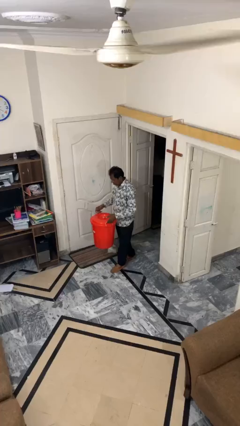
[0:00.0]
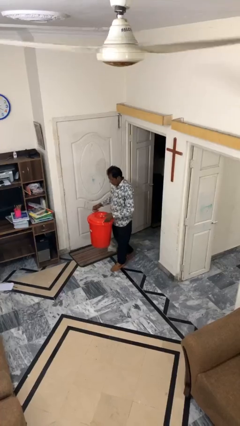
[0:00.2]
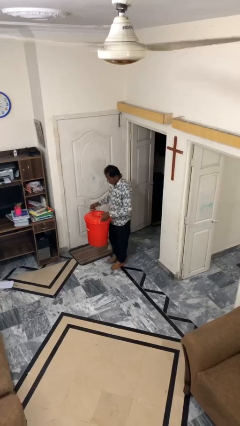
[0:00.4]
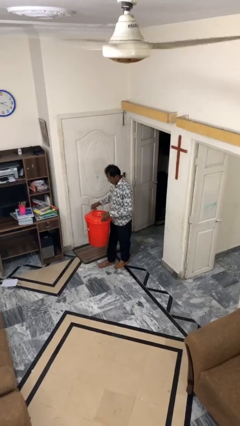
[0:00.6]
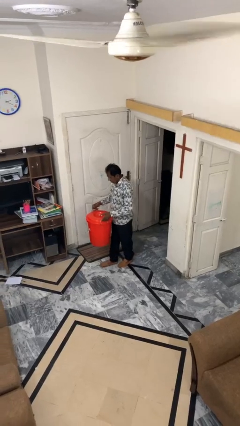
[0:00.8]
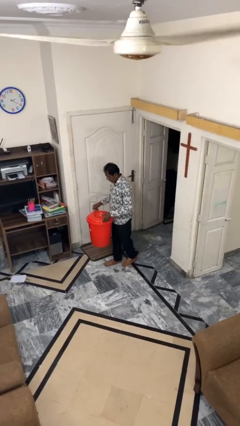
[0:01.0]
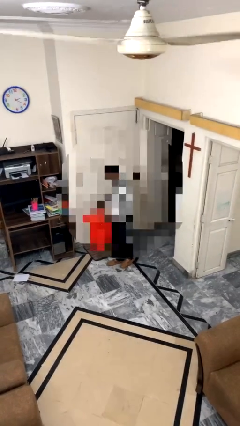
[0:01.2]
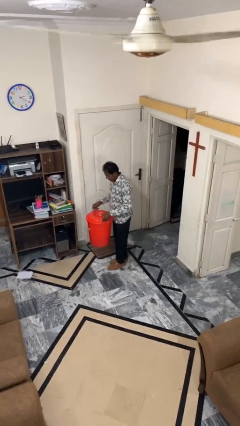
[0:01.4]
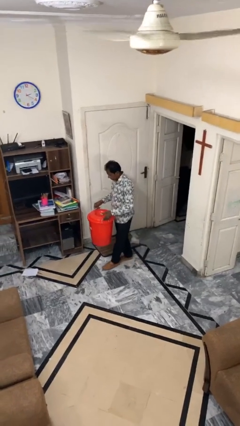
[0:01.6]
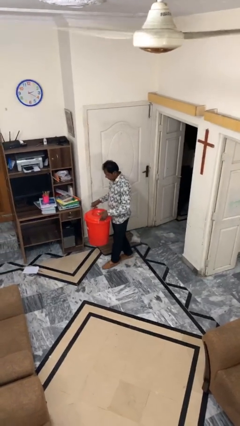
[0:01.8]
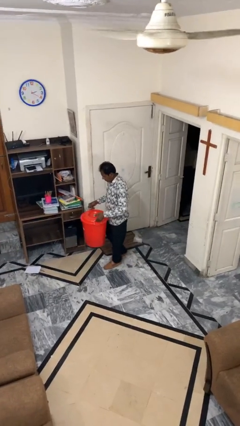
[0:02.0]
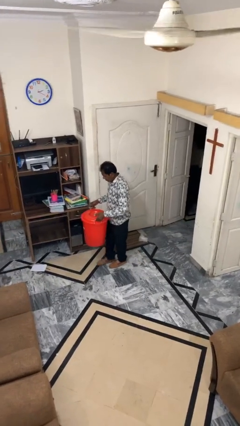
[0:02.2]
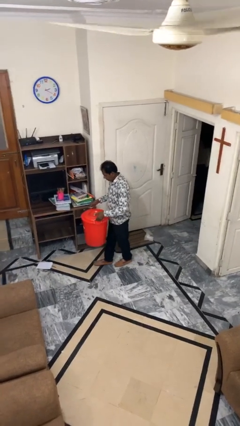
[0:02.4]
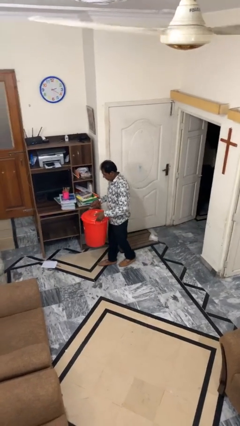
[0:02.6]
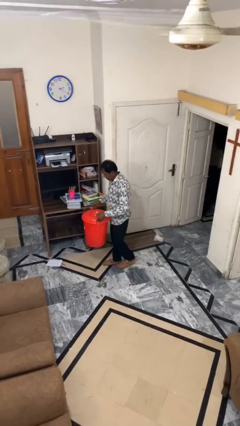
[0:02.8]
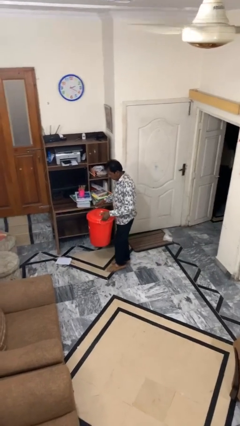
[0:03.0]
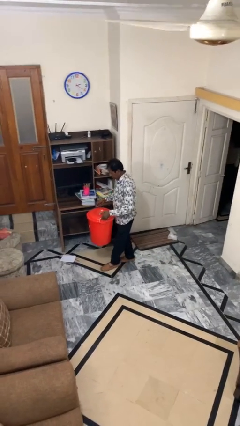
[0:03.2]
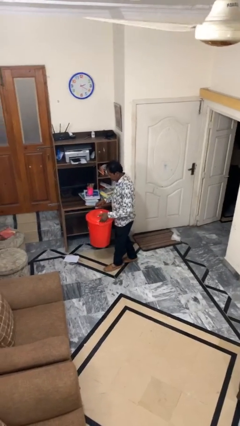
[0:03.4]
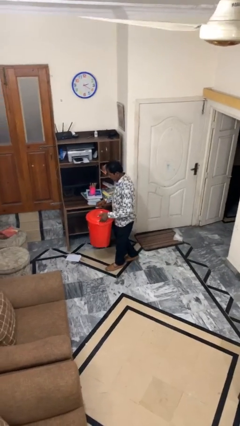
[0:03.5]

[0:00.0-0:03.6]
person carries heavy object

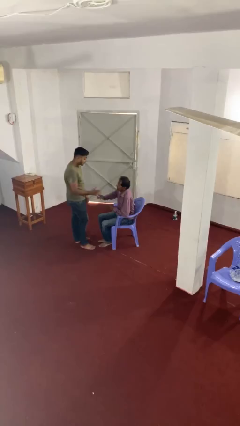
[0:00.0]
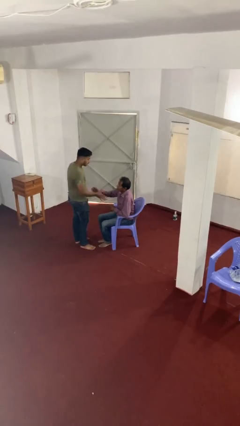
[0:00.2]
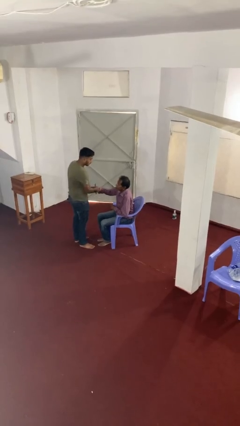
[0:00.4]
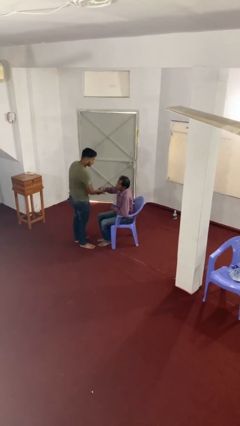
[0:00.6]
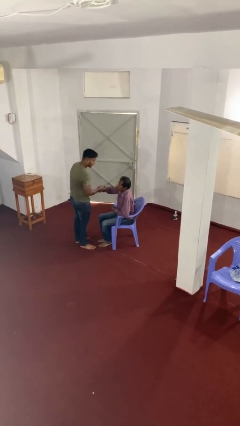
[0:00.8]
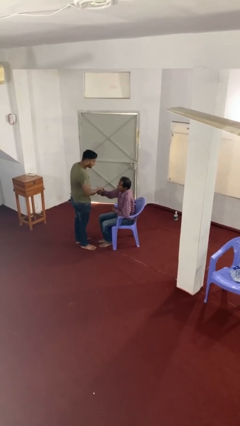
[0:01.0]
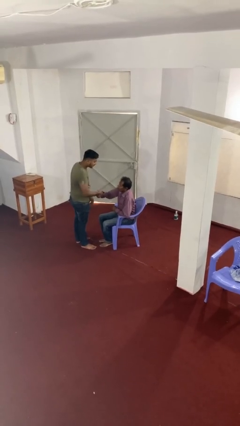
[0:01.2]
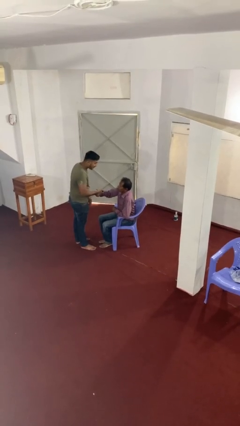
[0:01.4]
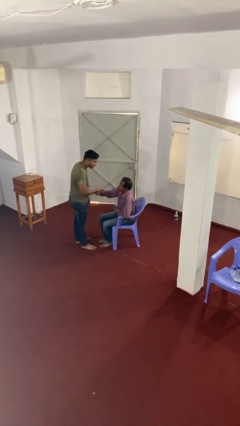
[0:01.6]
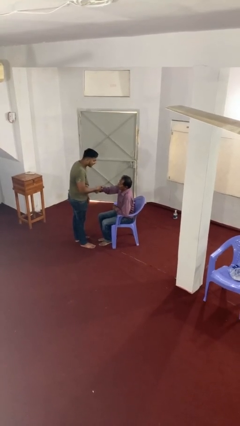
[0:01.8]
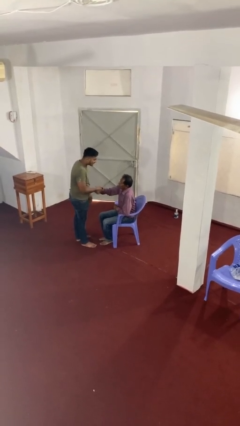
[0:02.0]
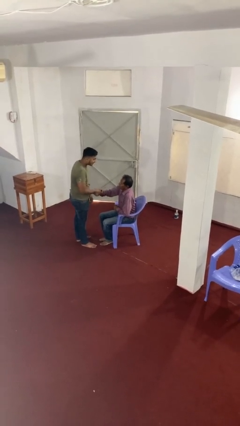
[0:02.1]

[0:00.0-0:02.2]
person shakes hand

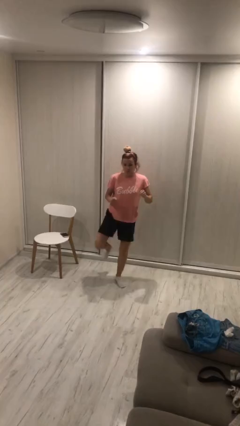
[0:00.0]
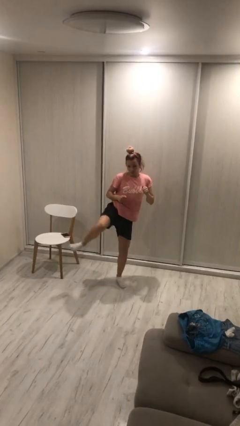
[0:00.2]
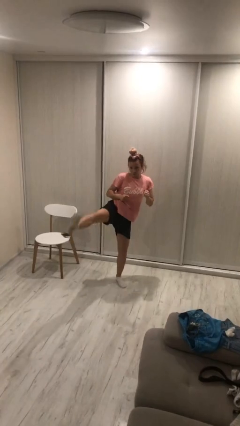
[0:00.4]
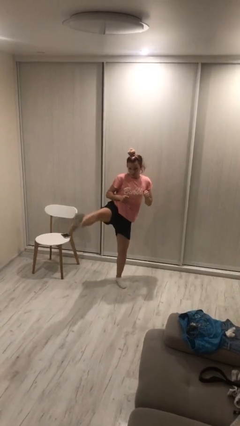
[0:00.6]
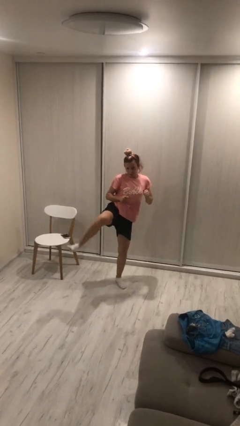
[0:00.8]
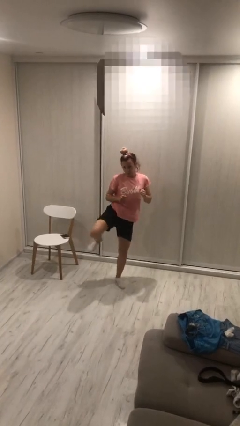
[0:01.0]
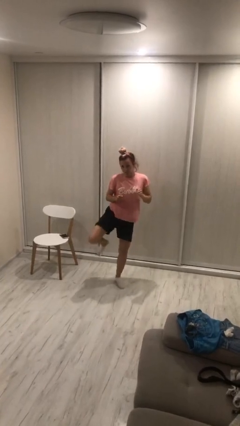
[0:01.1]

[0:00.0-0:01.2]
person karate kicks

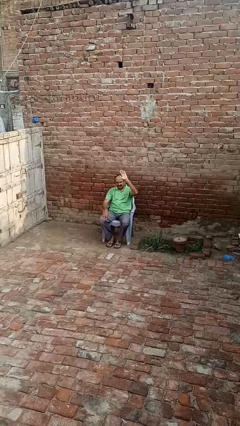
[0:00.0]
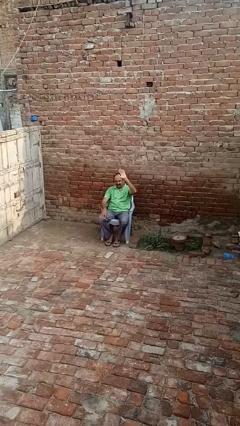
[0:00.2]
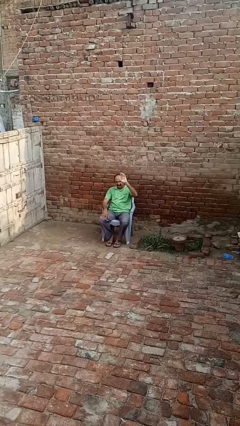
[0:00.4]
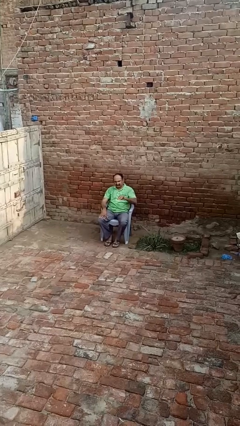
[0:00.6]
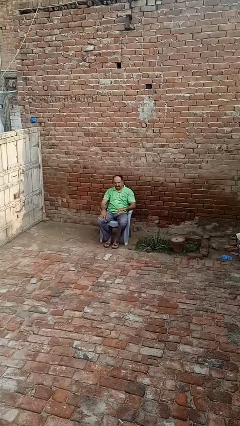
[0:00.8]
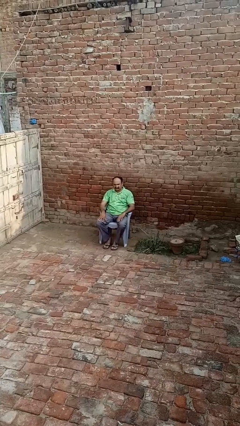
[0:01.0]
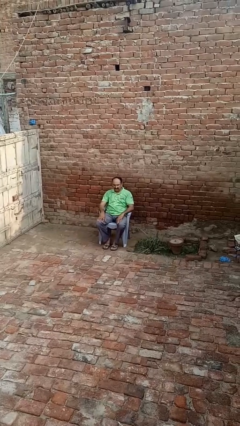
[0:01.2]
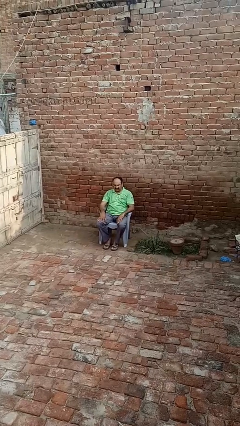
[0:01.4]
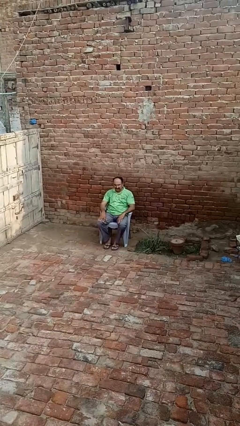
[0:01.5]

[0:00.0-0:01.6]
person gestures lower hand

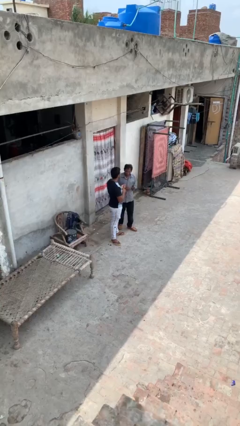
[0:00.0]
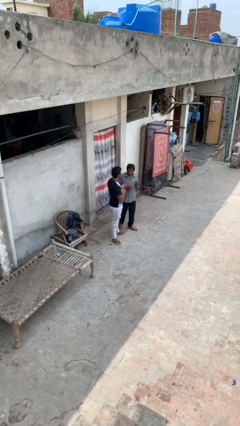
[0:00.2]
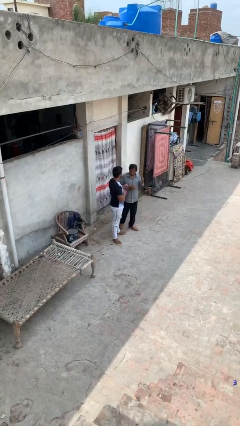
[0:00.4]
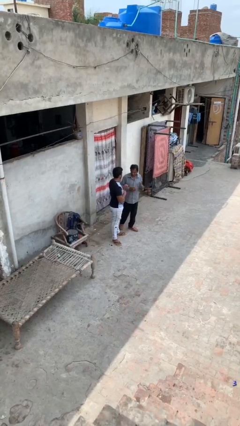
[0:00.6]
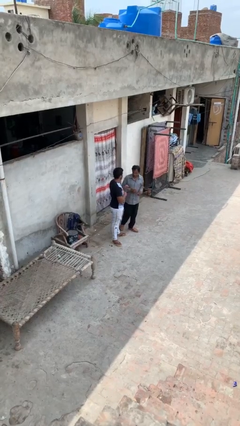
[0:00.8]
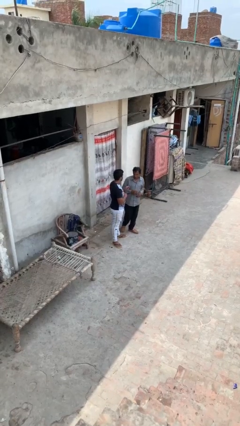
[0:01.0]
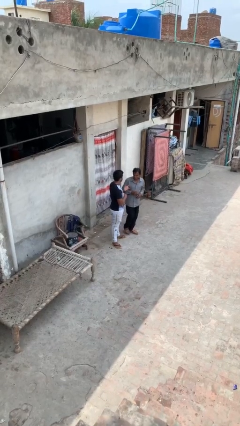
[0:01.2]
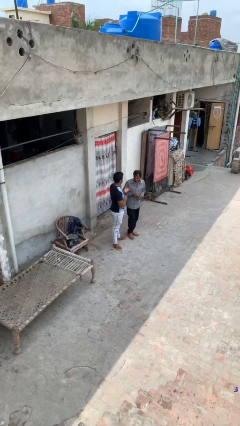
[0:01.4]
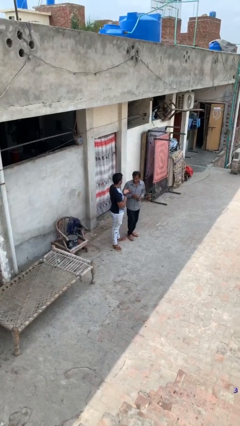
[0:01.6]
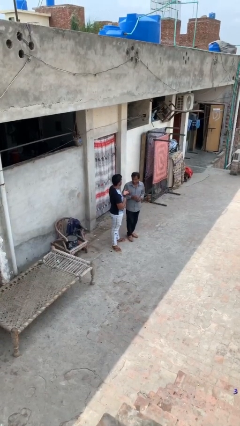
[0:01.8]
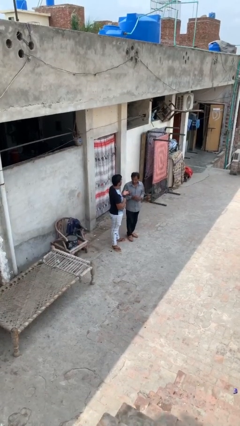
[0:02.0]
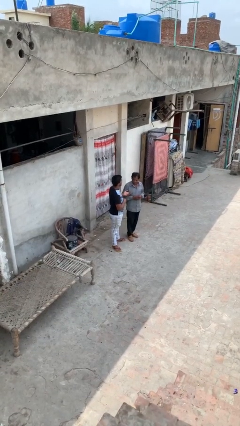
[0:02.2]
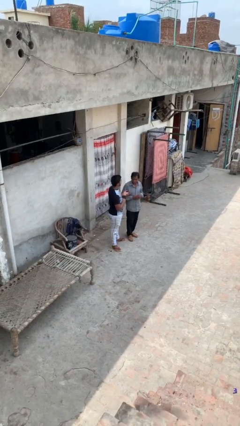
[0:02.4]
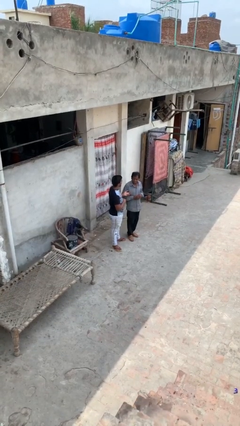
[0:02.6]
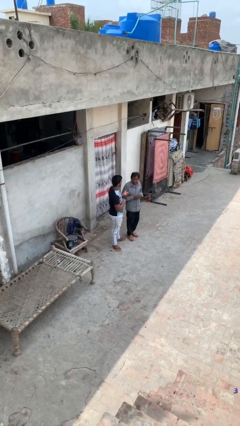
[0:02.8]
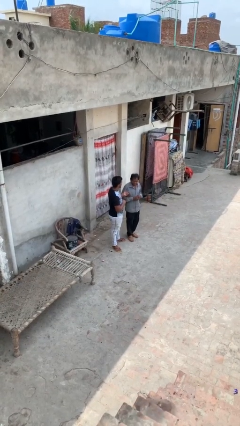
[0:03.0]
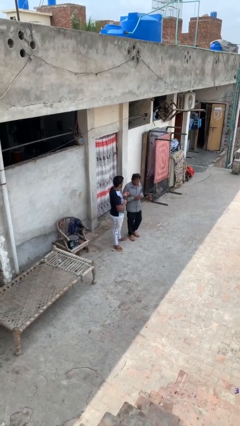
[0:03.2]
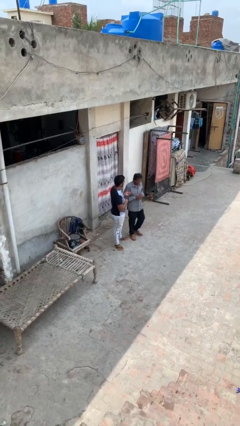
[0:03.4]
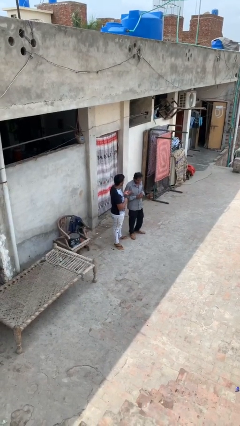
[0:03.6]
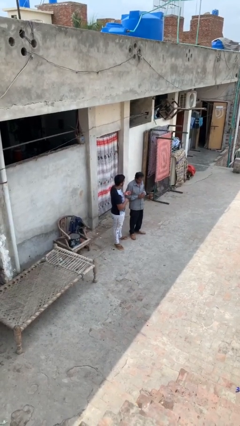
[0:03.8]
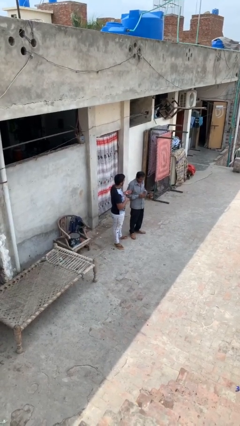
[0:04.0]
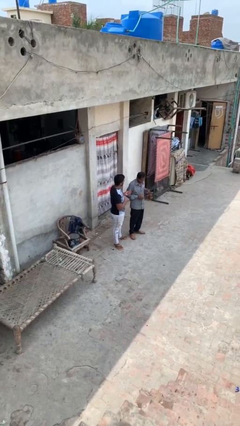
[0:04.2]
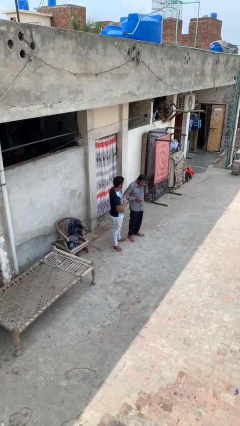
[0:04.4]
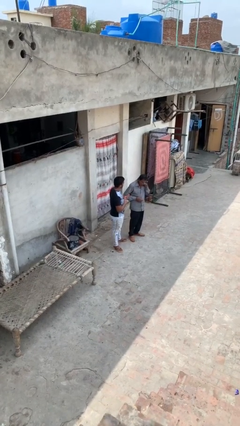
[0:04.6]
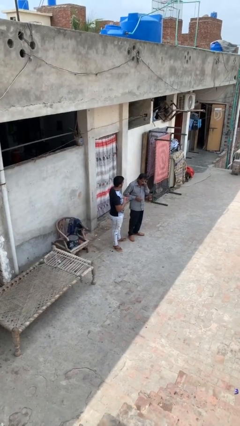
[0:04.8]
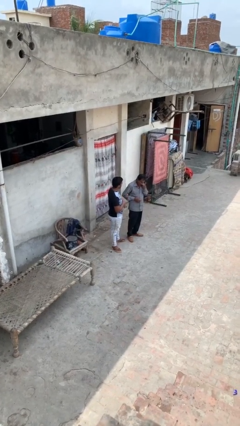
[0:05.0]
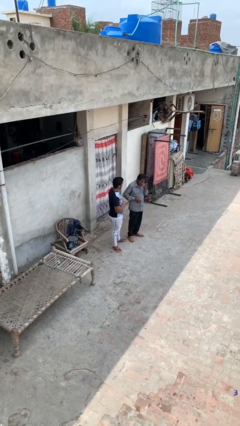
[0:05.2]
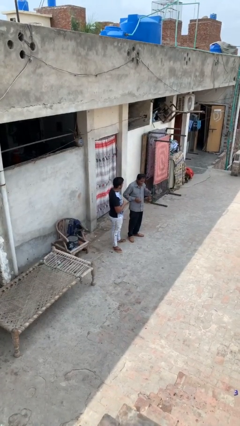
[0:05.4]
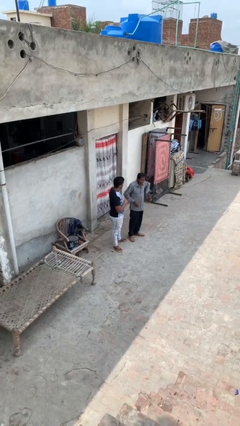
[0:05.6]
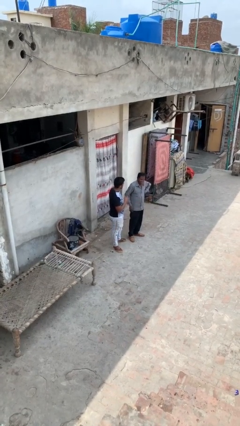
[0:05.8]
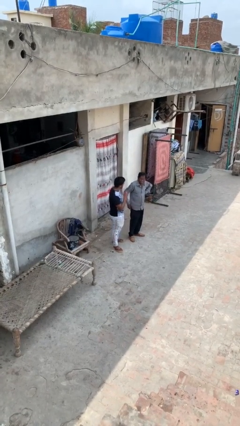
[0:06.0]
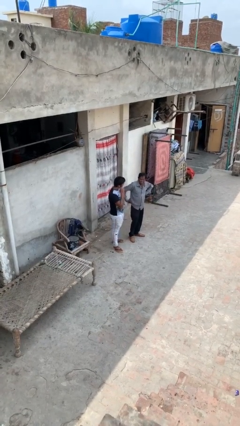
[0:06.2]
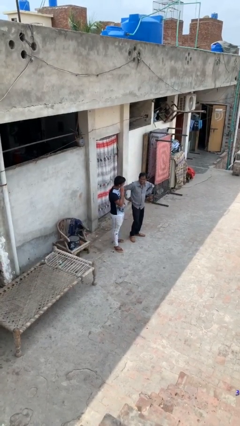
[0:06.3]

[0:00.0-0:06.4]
person talks to person

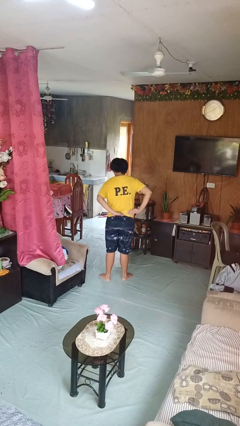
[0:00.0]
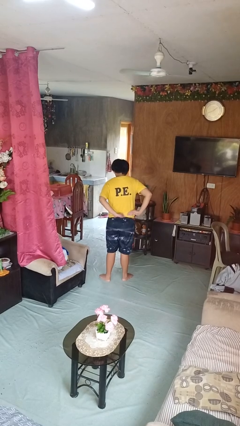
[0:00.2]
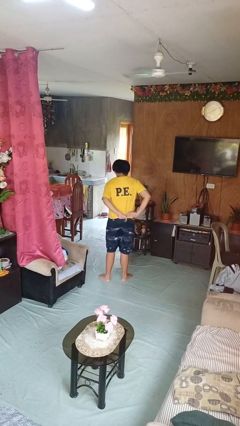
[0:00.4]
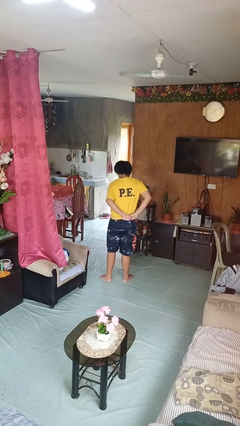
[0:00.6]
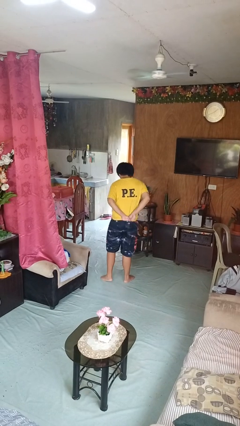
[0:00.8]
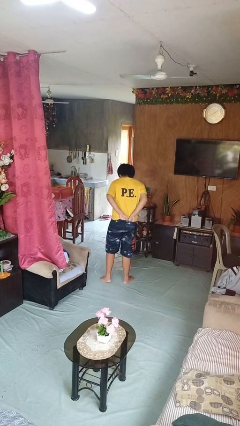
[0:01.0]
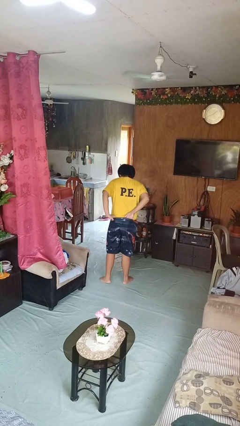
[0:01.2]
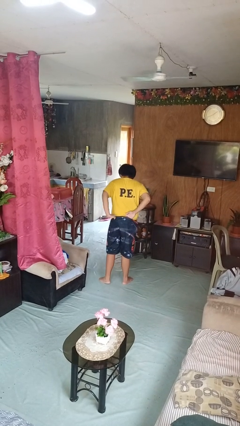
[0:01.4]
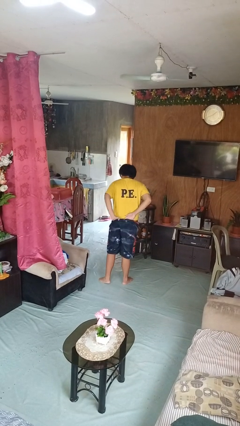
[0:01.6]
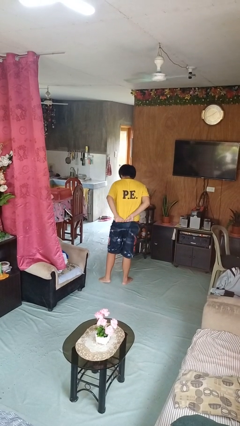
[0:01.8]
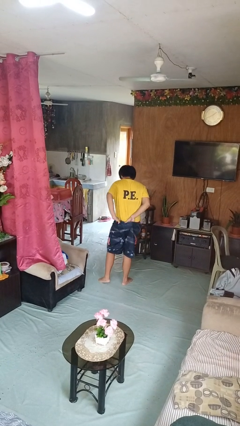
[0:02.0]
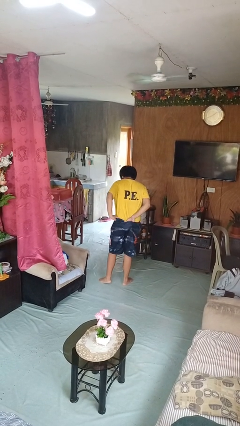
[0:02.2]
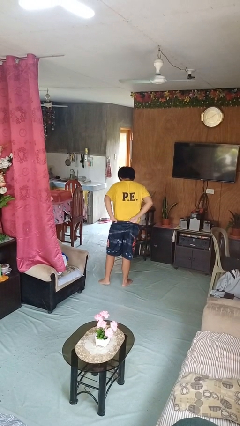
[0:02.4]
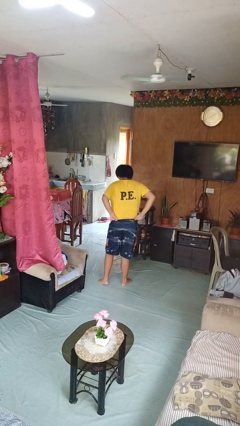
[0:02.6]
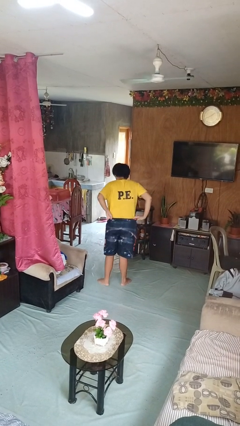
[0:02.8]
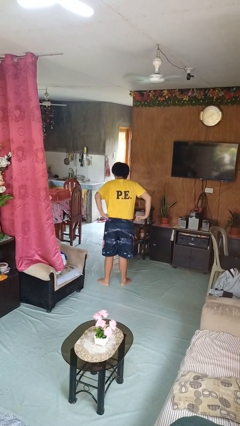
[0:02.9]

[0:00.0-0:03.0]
person tucks in shirt
